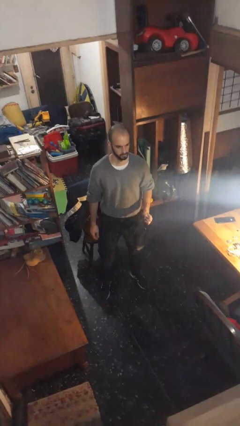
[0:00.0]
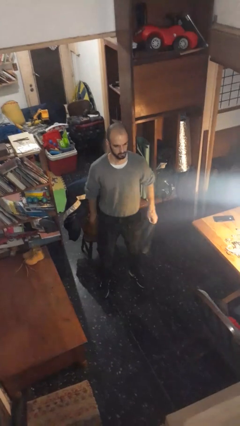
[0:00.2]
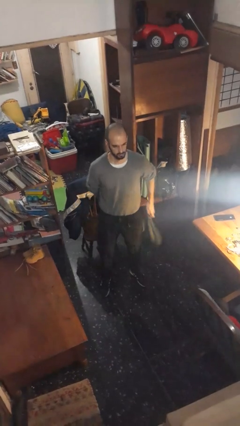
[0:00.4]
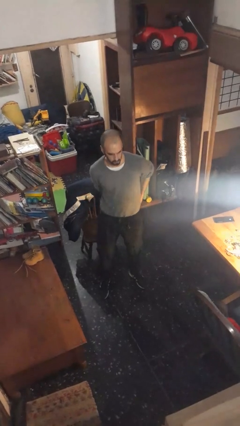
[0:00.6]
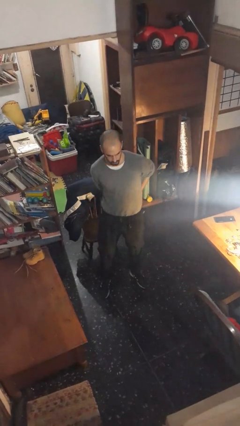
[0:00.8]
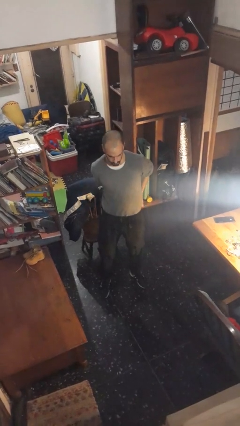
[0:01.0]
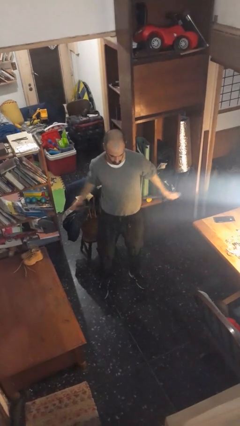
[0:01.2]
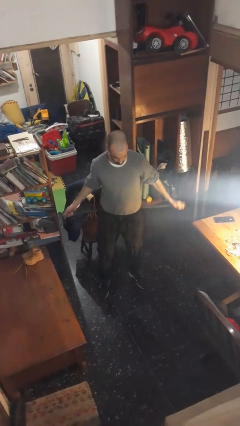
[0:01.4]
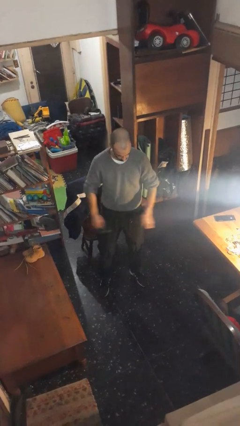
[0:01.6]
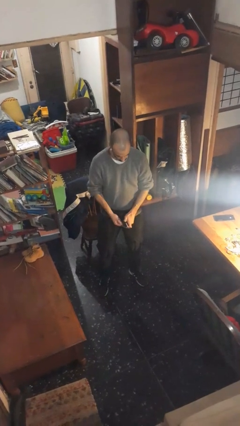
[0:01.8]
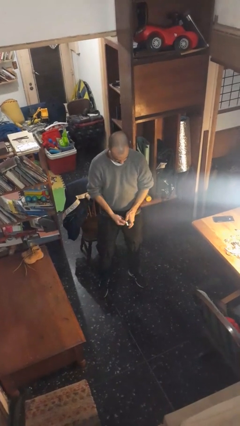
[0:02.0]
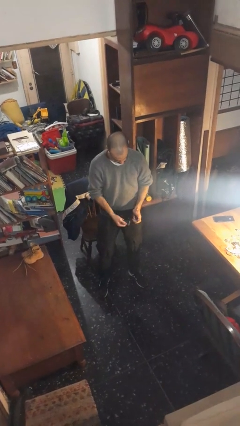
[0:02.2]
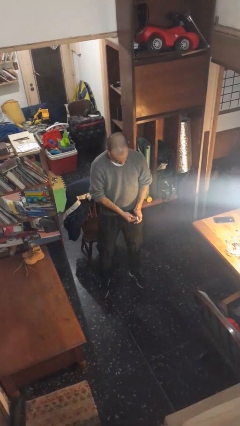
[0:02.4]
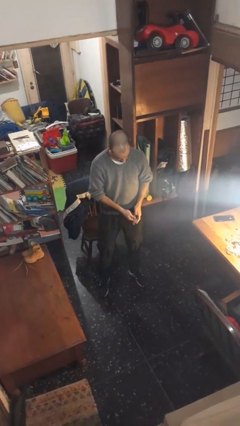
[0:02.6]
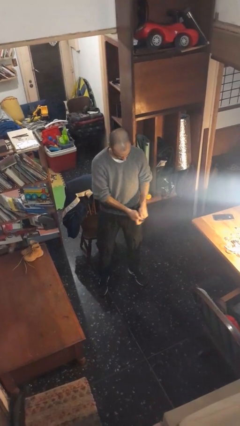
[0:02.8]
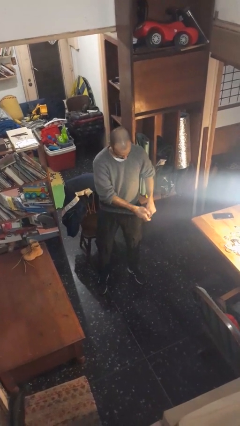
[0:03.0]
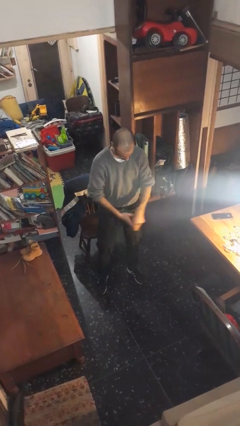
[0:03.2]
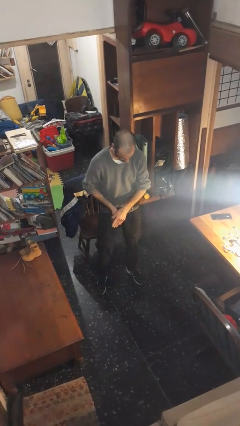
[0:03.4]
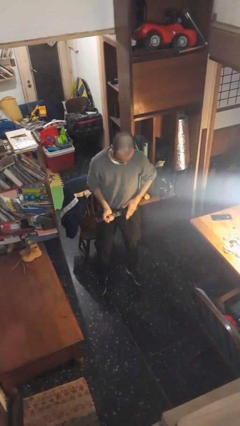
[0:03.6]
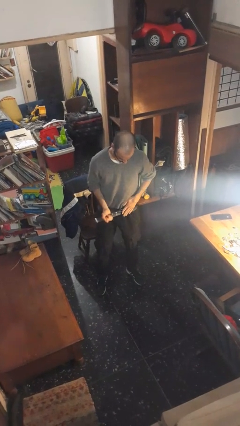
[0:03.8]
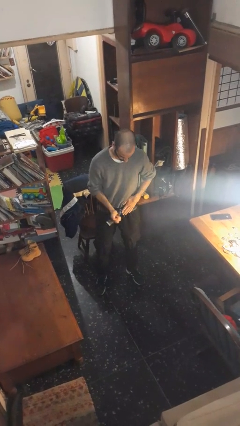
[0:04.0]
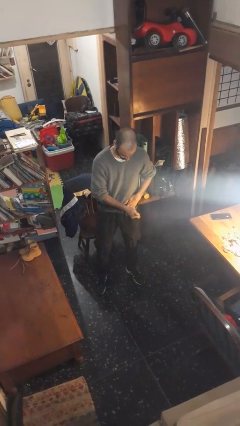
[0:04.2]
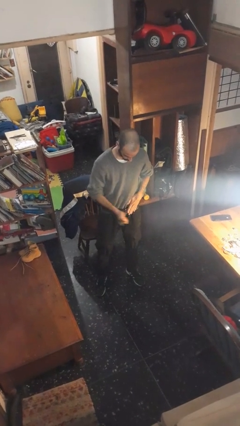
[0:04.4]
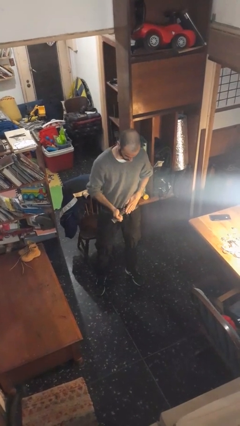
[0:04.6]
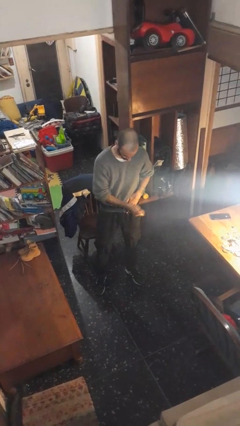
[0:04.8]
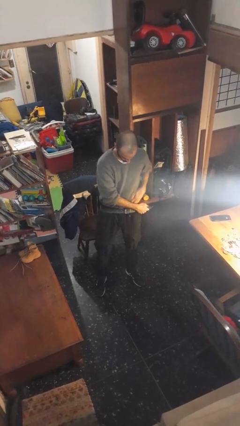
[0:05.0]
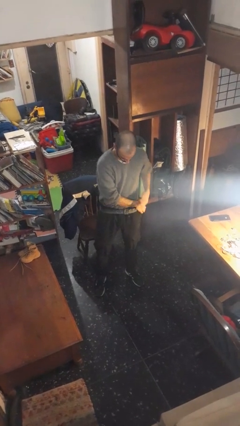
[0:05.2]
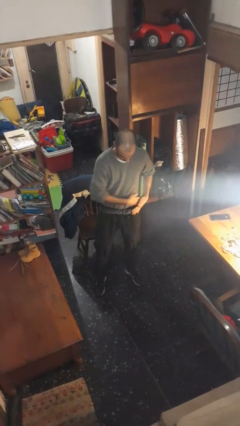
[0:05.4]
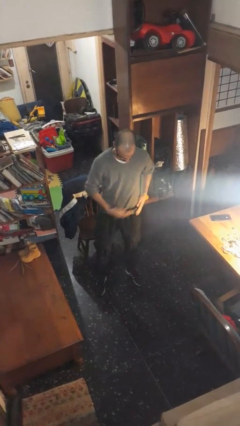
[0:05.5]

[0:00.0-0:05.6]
person puts on belt

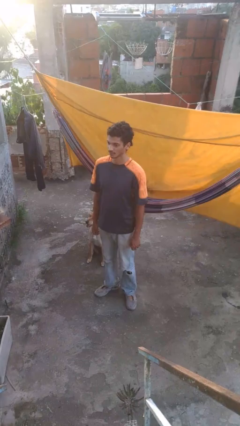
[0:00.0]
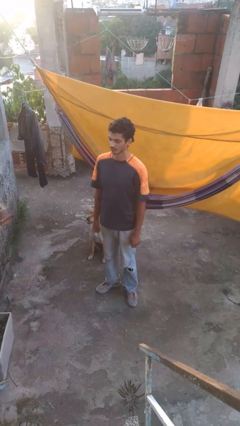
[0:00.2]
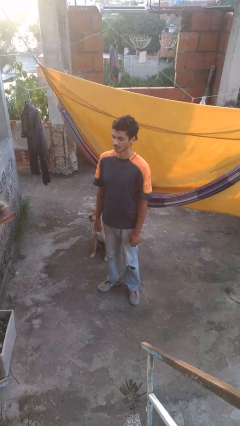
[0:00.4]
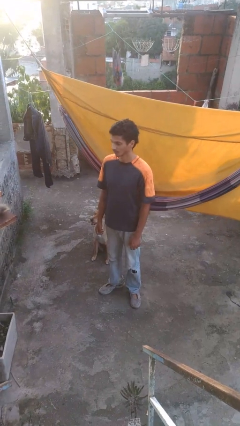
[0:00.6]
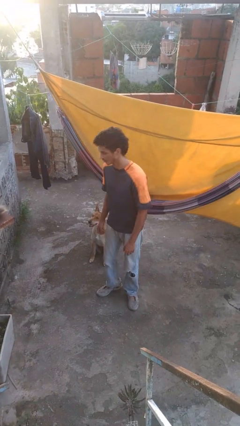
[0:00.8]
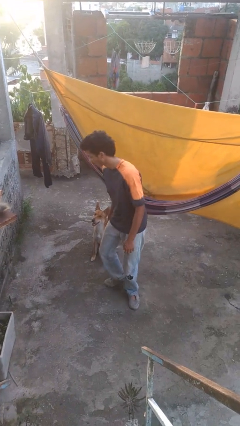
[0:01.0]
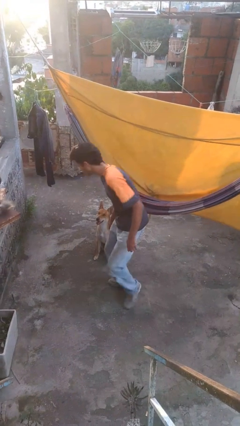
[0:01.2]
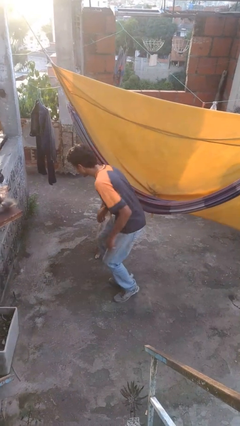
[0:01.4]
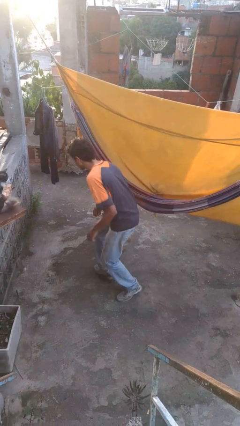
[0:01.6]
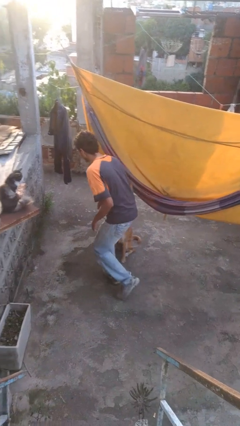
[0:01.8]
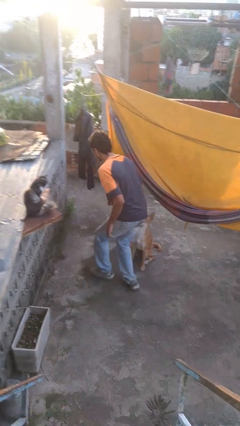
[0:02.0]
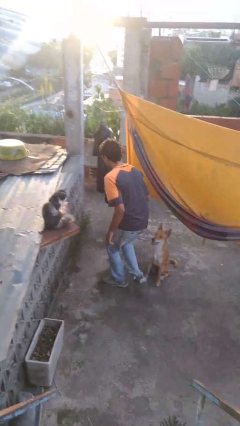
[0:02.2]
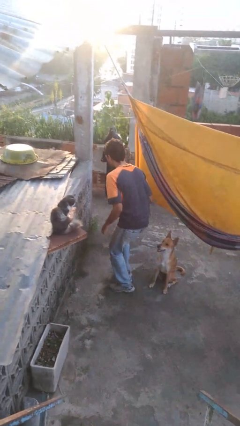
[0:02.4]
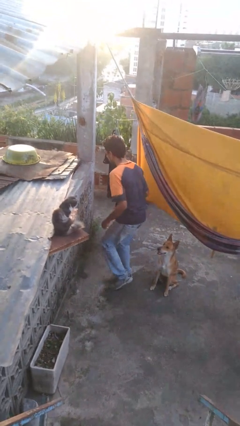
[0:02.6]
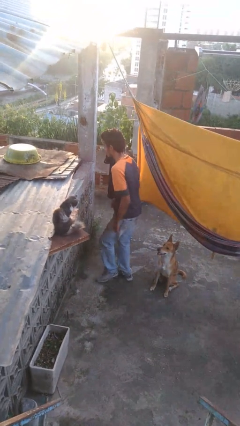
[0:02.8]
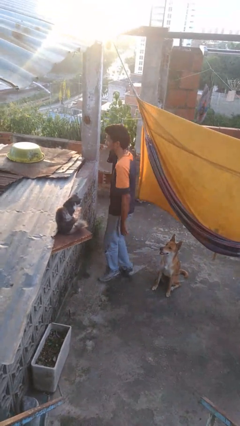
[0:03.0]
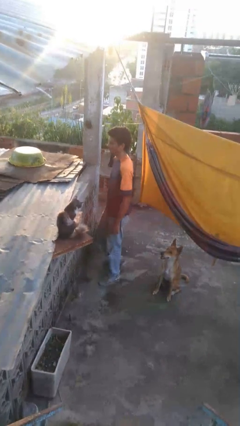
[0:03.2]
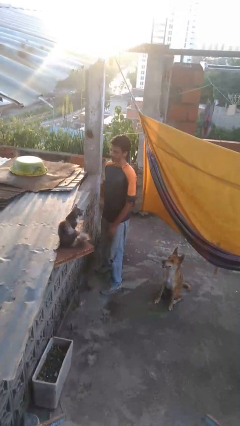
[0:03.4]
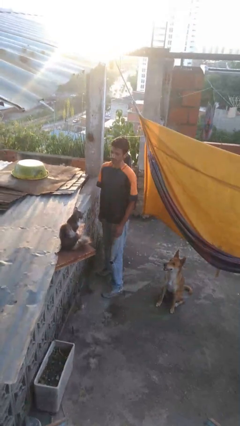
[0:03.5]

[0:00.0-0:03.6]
person walks tiptoe

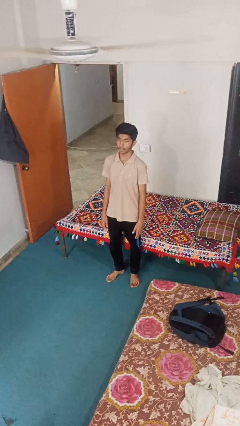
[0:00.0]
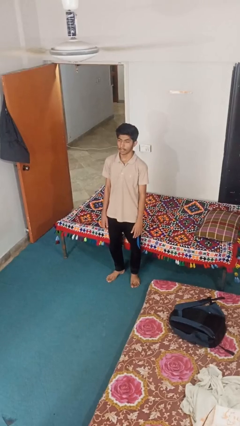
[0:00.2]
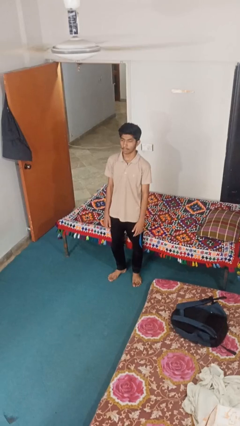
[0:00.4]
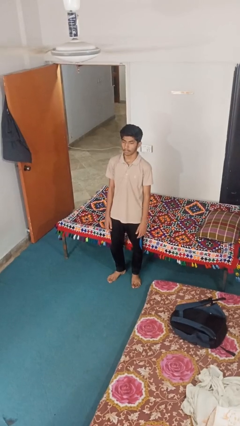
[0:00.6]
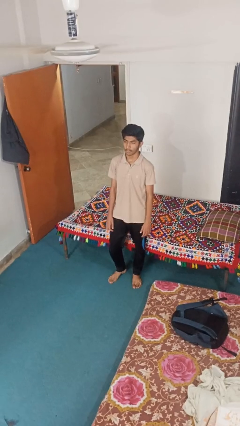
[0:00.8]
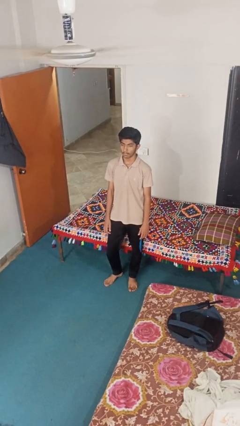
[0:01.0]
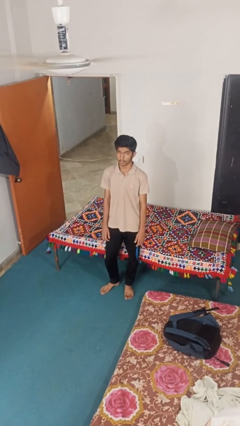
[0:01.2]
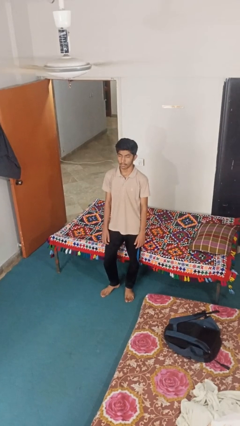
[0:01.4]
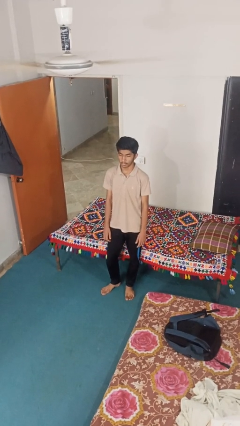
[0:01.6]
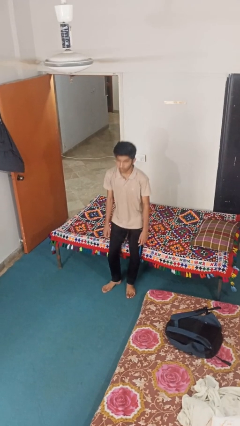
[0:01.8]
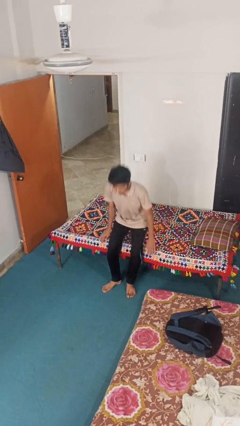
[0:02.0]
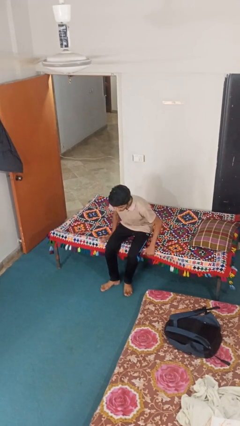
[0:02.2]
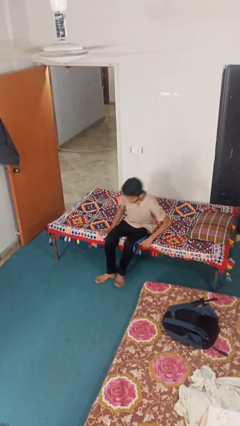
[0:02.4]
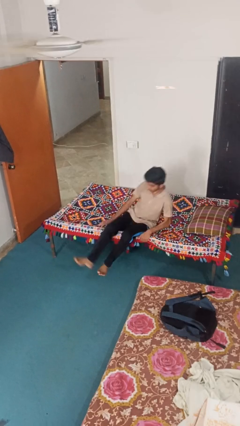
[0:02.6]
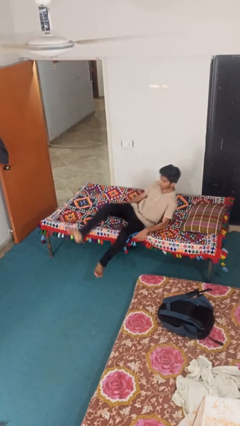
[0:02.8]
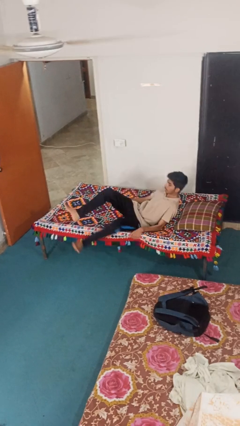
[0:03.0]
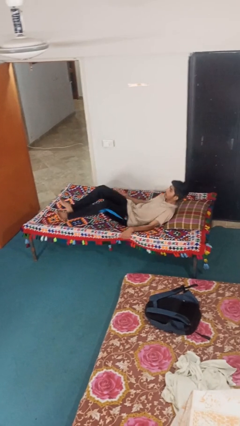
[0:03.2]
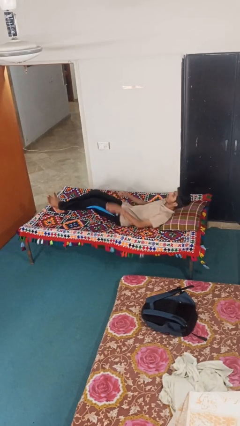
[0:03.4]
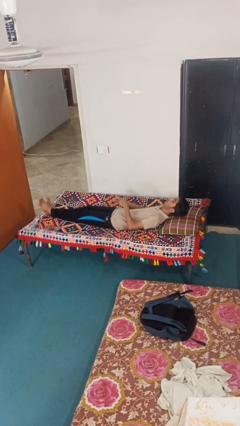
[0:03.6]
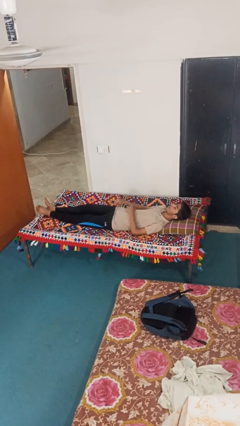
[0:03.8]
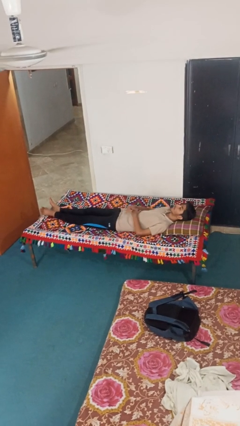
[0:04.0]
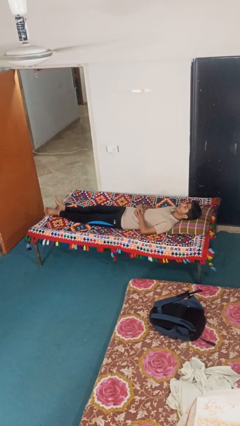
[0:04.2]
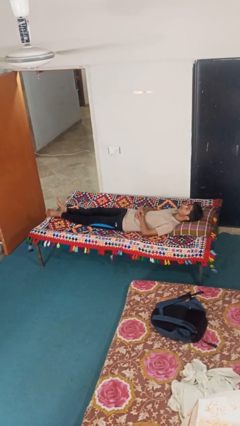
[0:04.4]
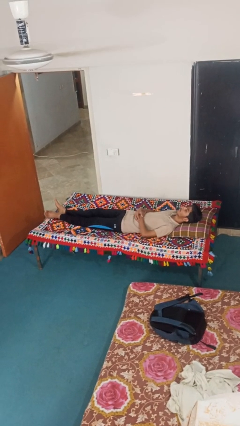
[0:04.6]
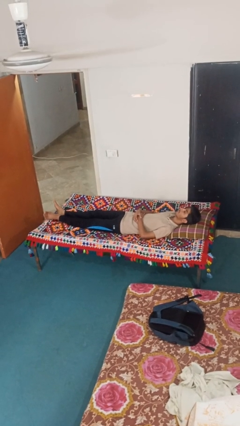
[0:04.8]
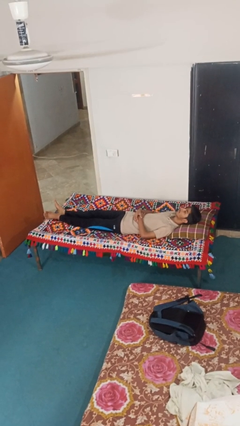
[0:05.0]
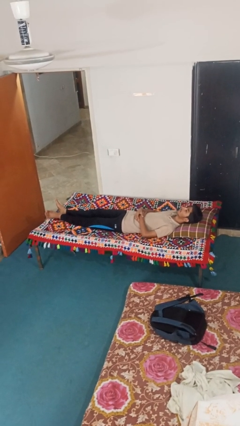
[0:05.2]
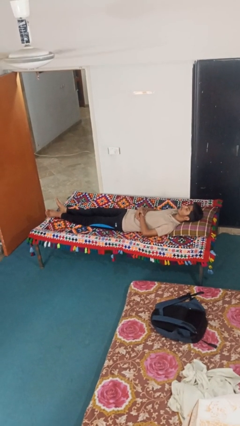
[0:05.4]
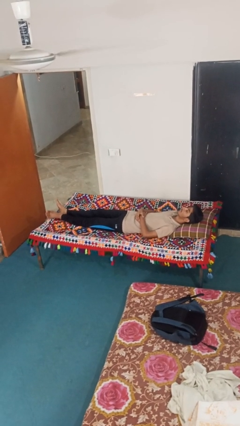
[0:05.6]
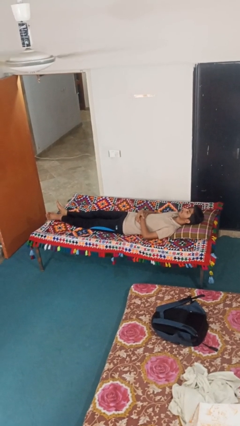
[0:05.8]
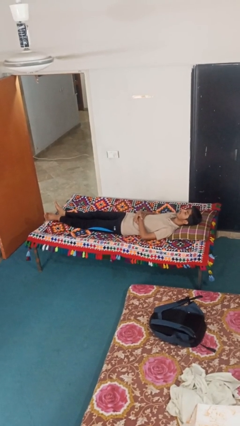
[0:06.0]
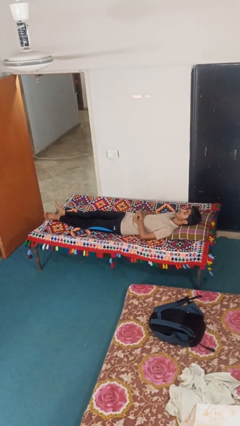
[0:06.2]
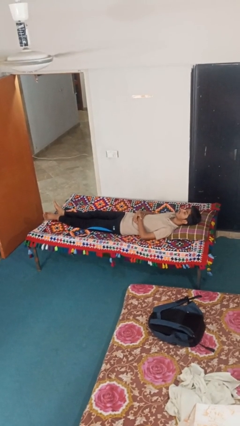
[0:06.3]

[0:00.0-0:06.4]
person lies down on bed

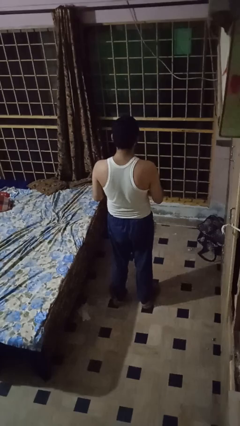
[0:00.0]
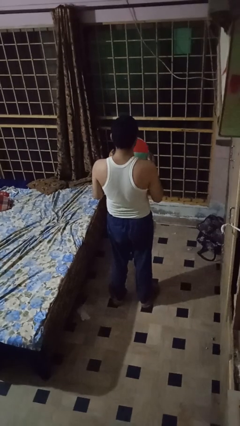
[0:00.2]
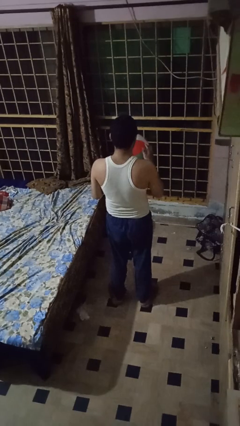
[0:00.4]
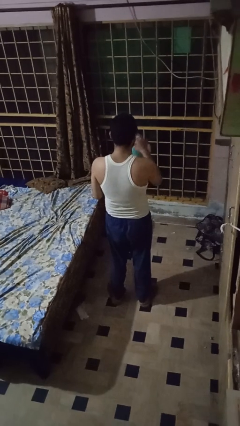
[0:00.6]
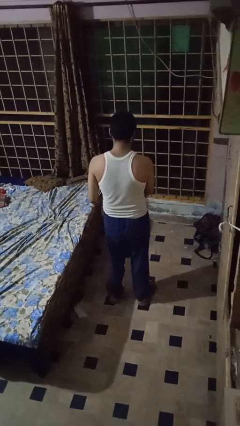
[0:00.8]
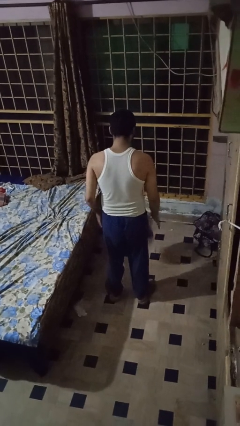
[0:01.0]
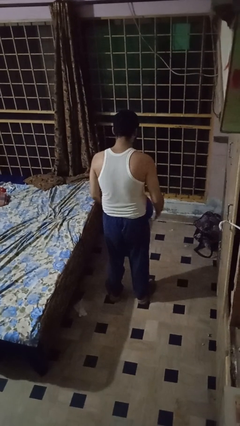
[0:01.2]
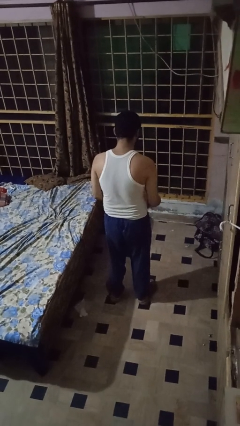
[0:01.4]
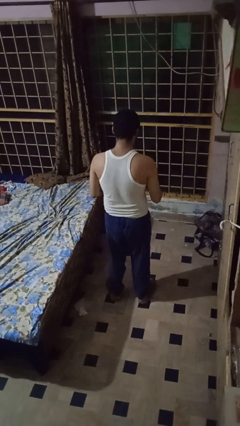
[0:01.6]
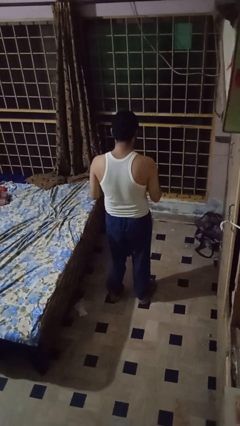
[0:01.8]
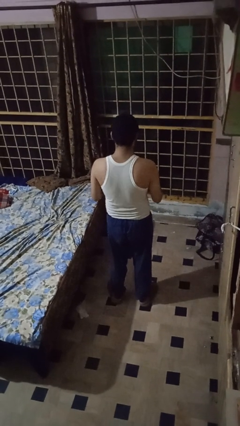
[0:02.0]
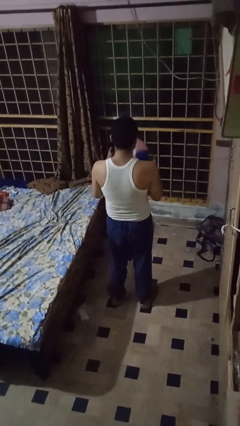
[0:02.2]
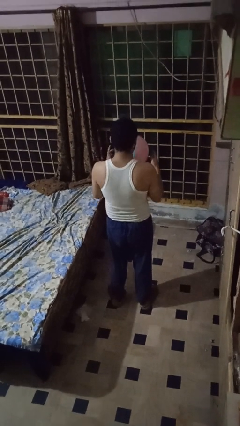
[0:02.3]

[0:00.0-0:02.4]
person bounces ball on floor
